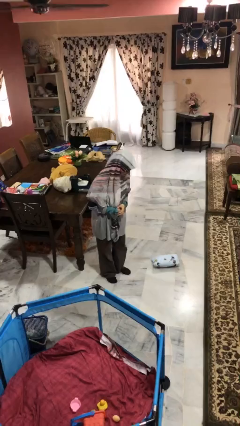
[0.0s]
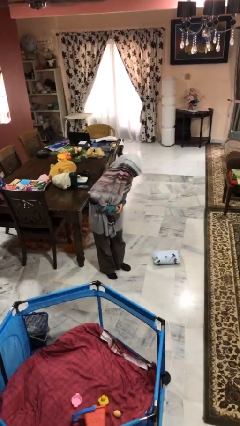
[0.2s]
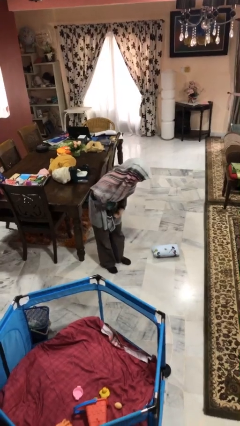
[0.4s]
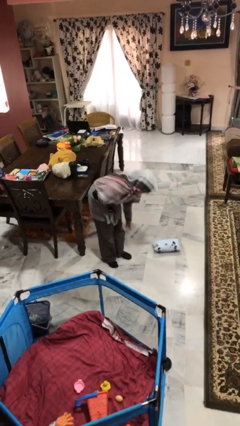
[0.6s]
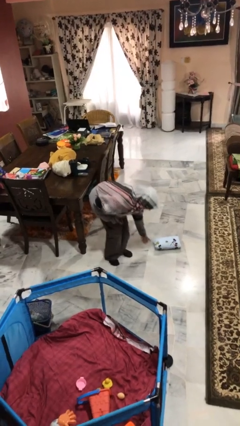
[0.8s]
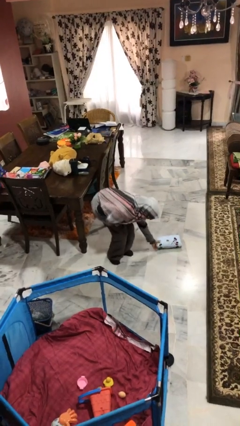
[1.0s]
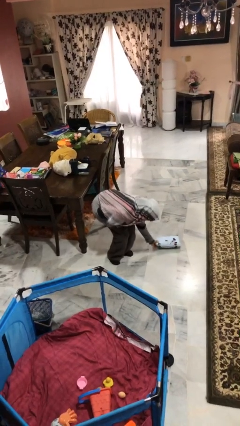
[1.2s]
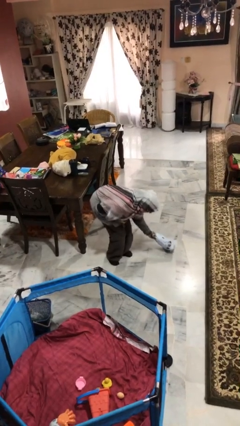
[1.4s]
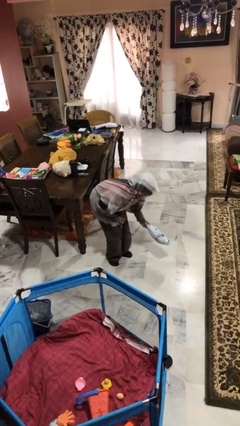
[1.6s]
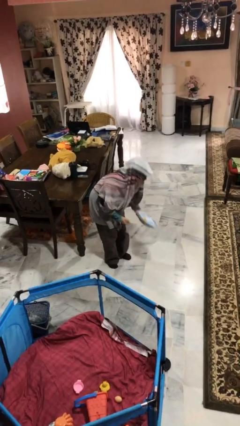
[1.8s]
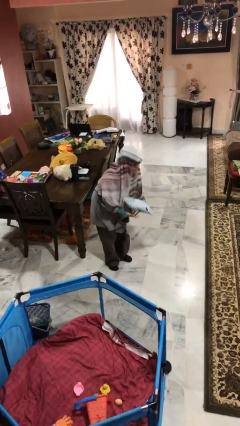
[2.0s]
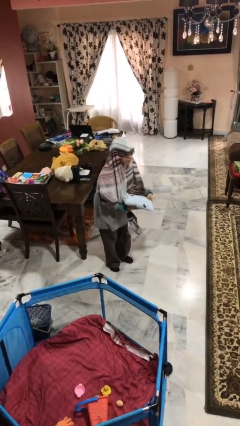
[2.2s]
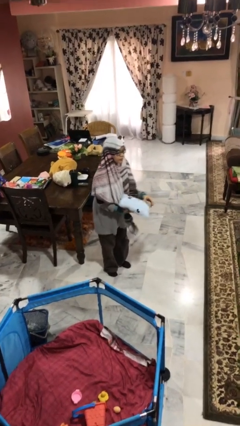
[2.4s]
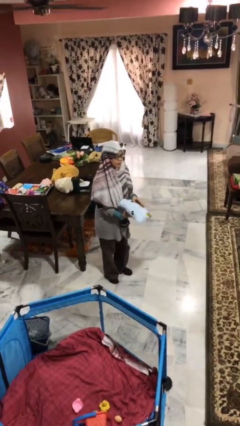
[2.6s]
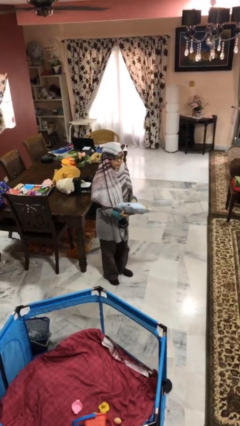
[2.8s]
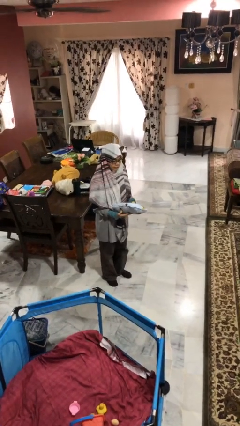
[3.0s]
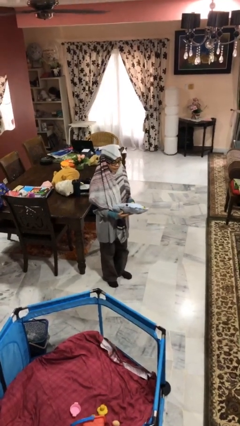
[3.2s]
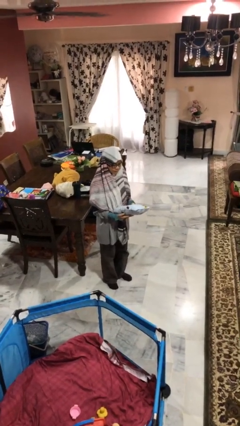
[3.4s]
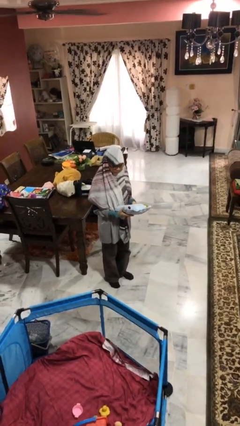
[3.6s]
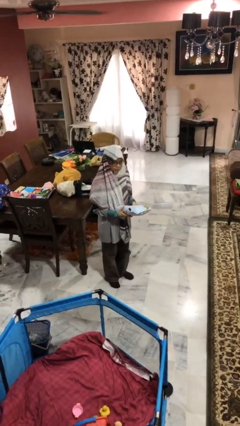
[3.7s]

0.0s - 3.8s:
person picks up object from floor

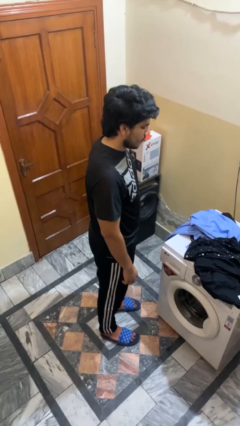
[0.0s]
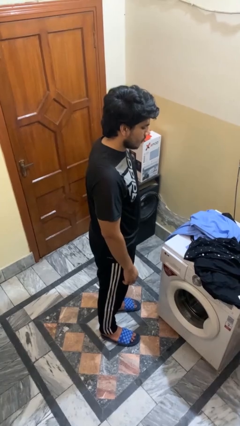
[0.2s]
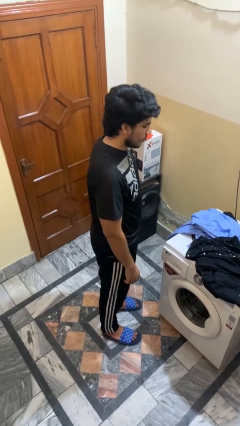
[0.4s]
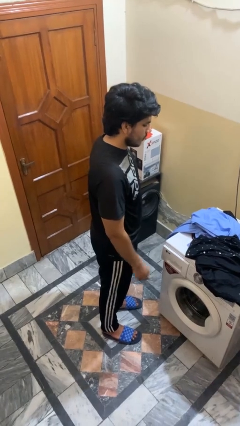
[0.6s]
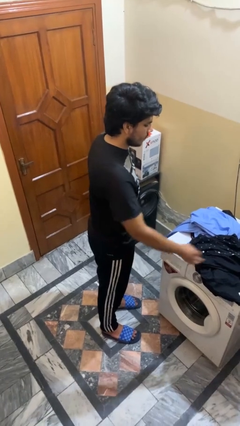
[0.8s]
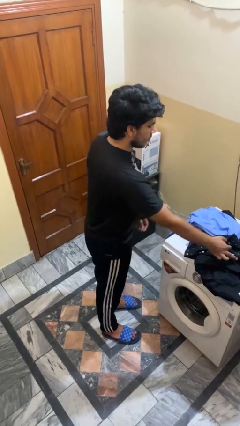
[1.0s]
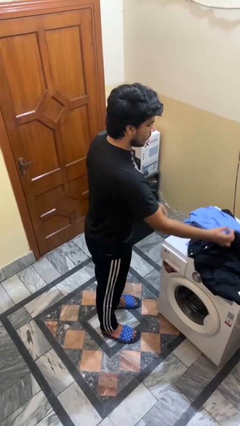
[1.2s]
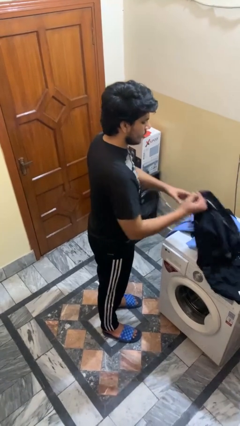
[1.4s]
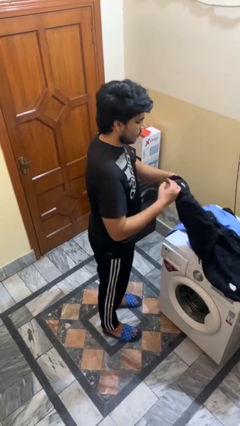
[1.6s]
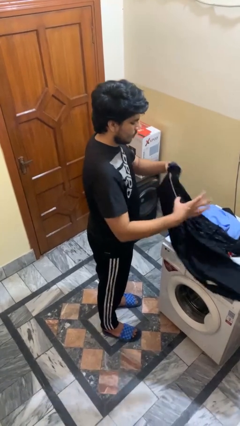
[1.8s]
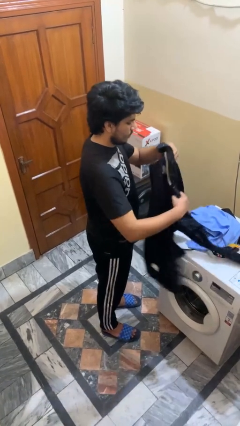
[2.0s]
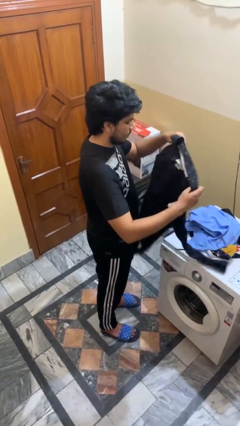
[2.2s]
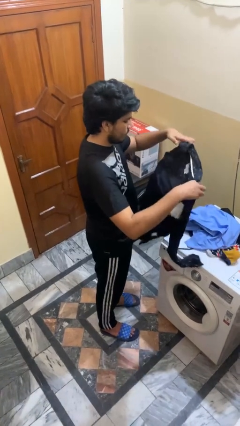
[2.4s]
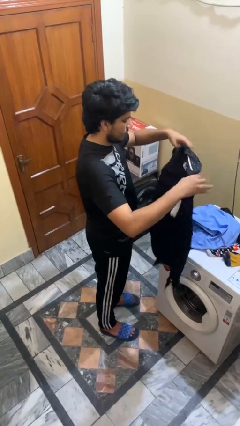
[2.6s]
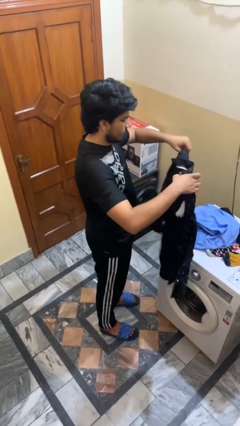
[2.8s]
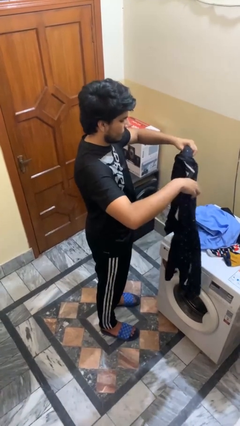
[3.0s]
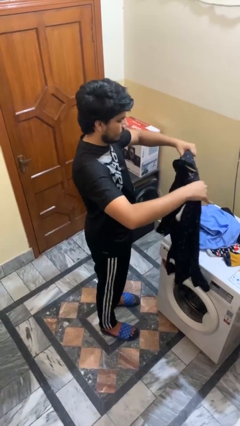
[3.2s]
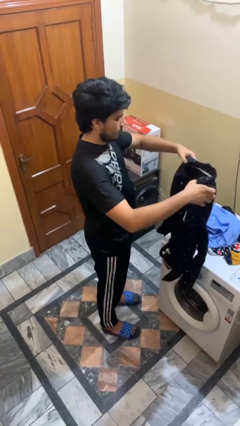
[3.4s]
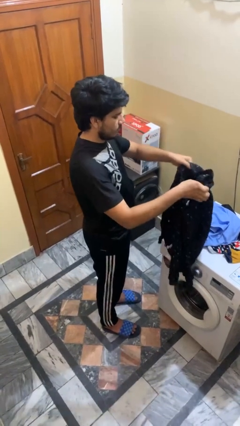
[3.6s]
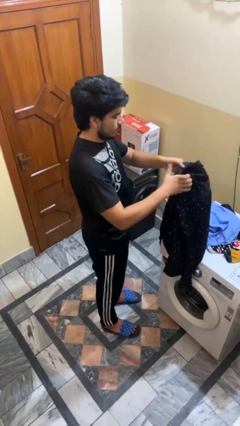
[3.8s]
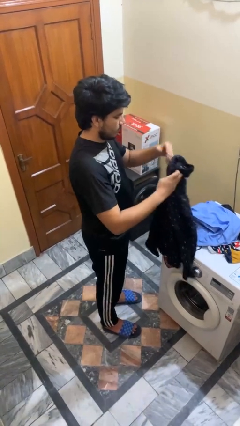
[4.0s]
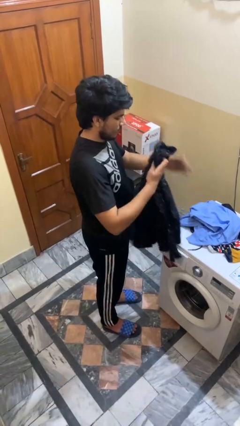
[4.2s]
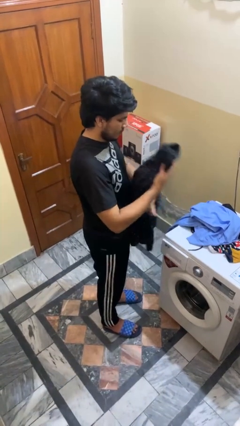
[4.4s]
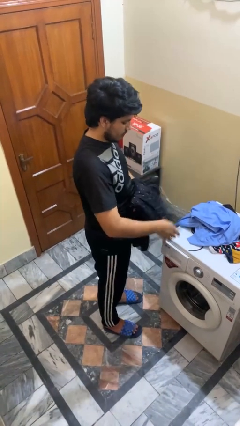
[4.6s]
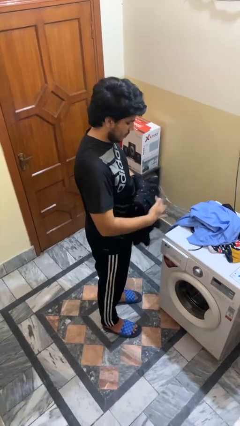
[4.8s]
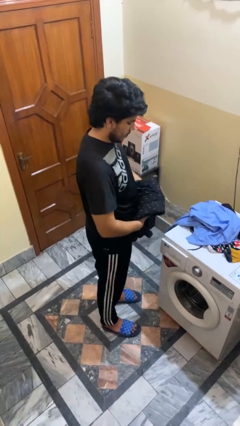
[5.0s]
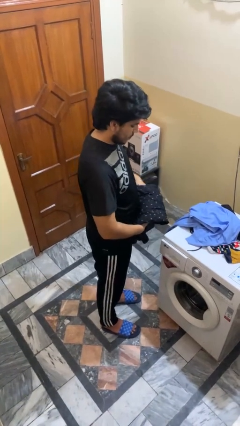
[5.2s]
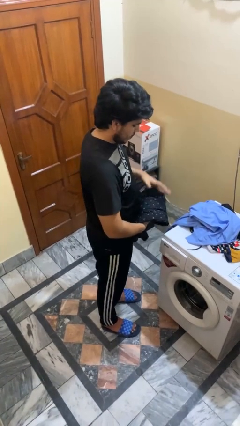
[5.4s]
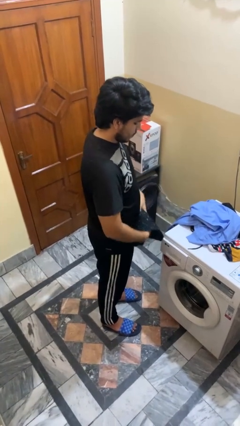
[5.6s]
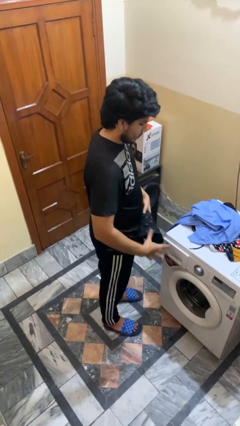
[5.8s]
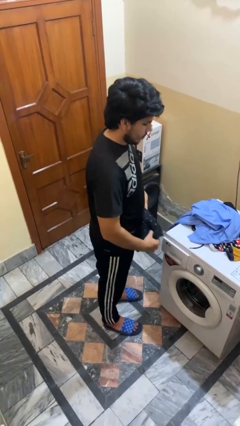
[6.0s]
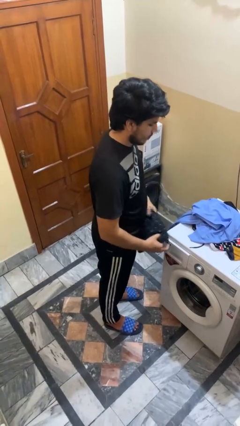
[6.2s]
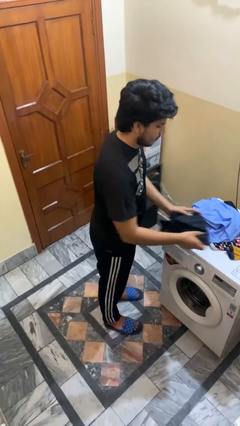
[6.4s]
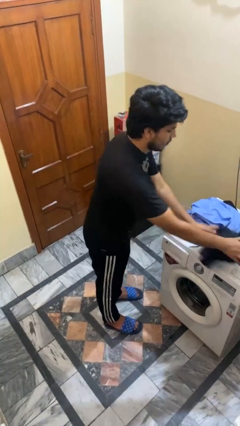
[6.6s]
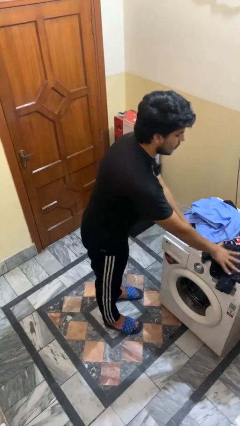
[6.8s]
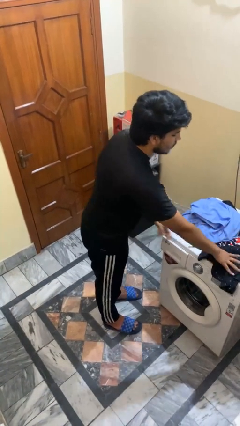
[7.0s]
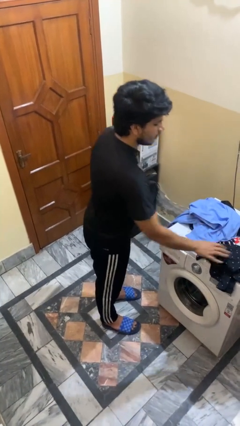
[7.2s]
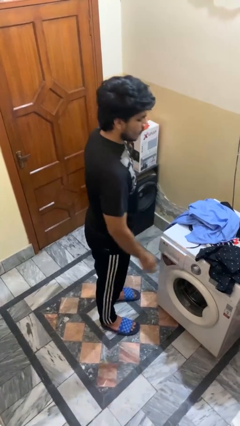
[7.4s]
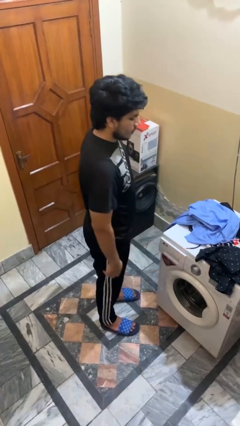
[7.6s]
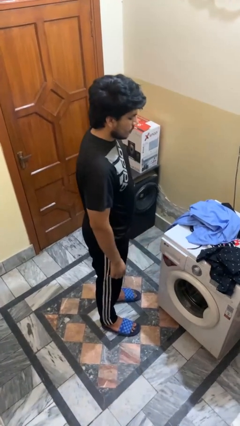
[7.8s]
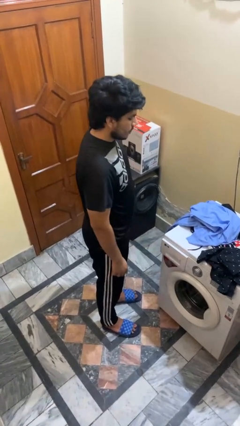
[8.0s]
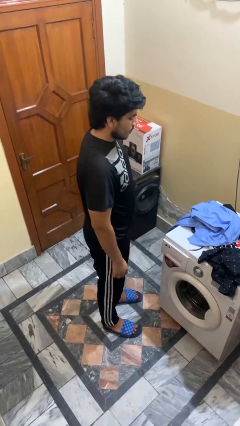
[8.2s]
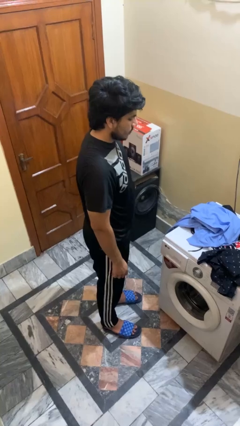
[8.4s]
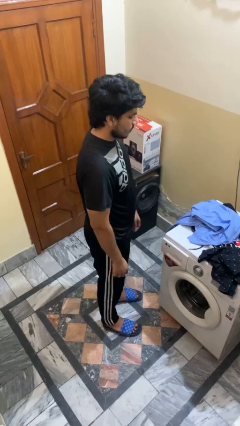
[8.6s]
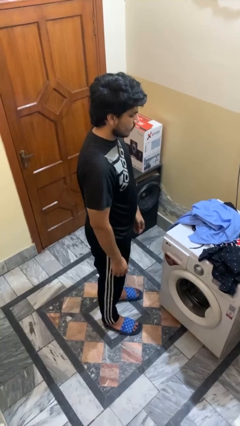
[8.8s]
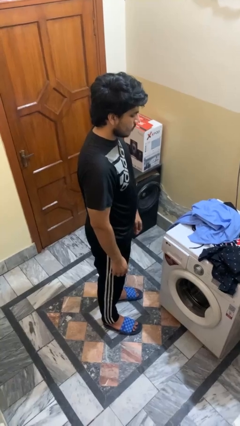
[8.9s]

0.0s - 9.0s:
person folds shirt

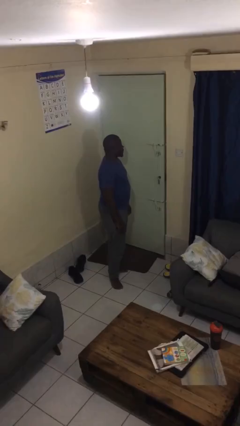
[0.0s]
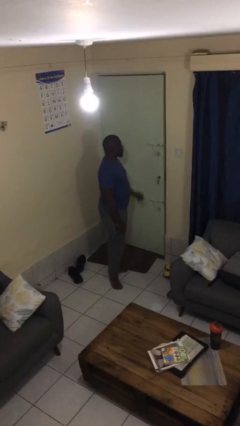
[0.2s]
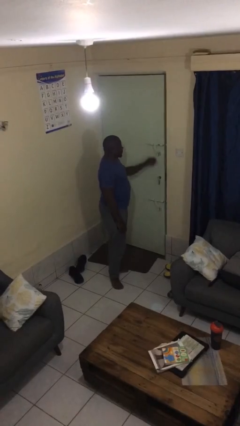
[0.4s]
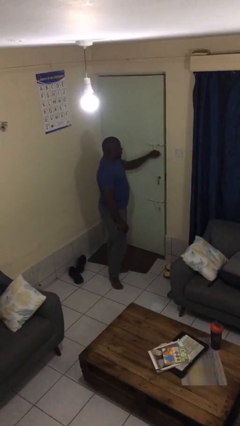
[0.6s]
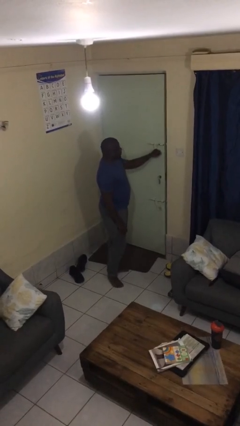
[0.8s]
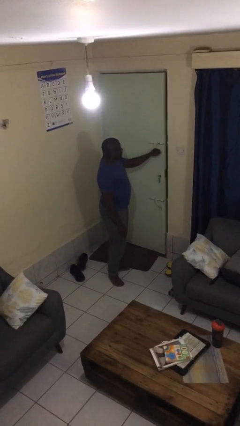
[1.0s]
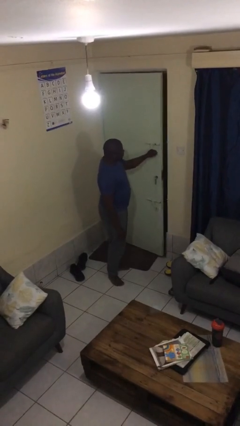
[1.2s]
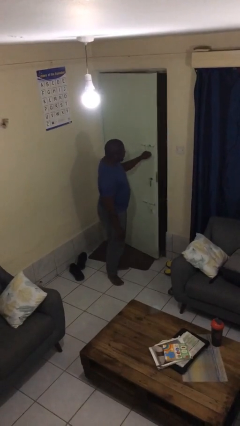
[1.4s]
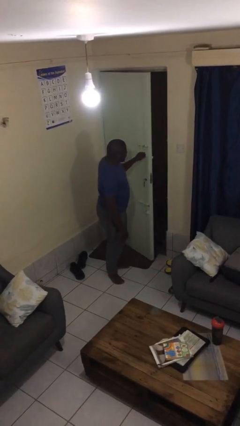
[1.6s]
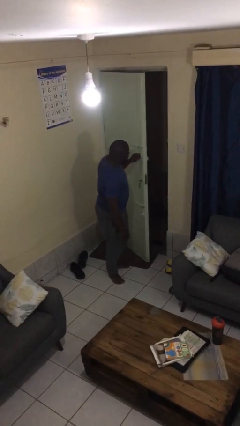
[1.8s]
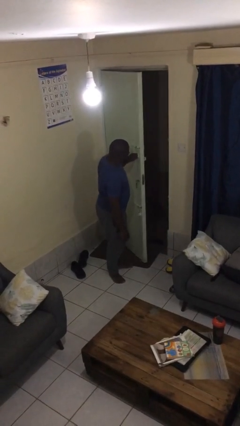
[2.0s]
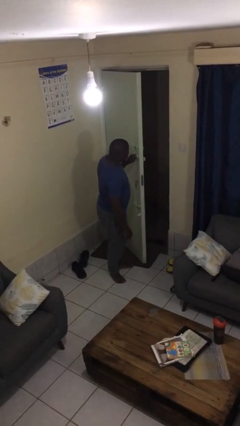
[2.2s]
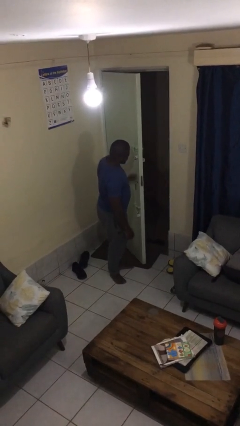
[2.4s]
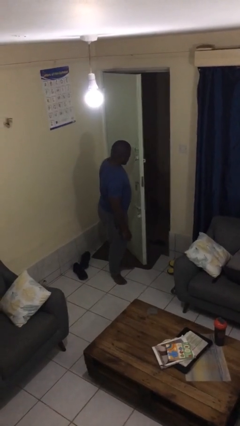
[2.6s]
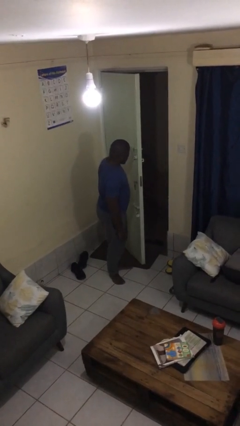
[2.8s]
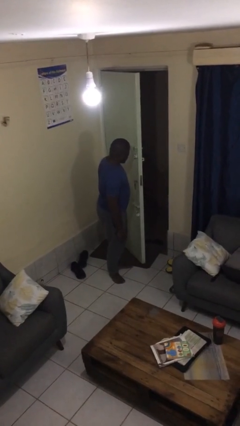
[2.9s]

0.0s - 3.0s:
person opens facility door

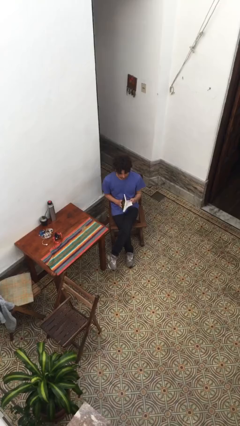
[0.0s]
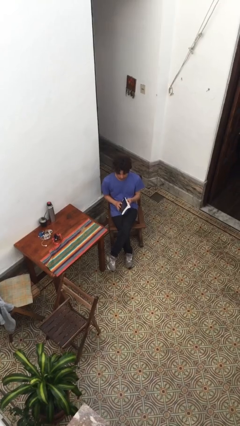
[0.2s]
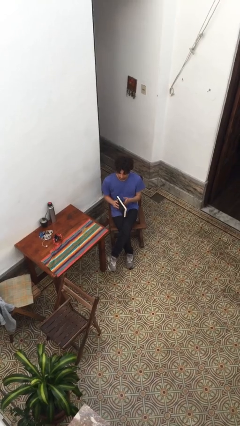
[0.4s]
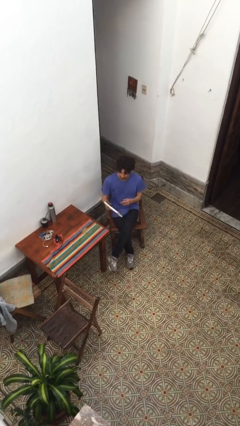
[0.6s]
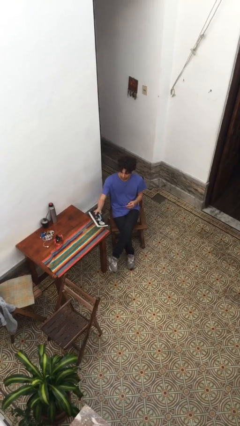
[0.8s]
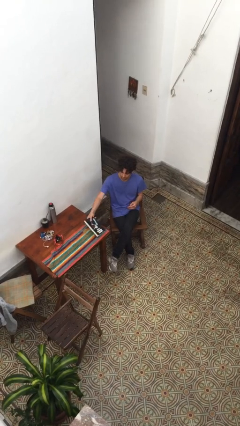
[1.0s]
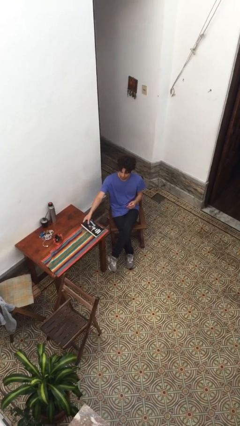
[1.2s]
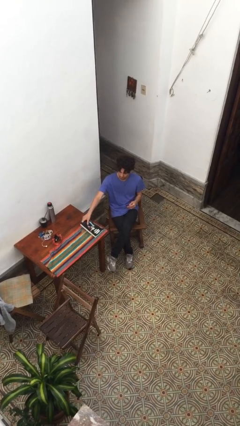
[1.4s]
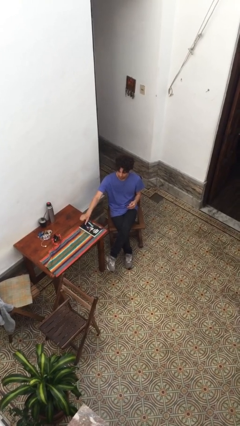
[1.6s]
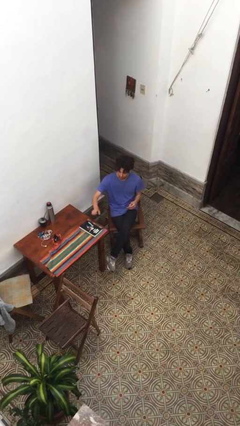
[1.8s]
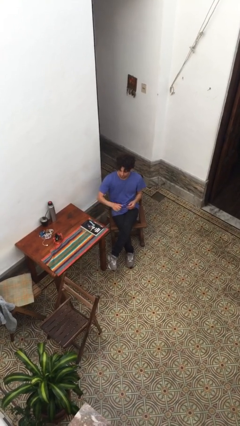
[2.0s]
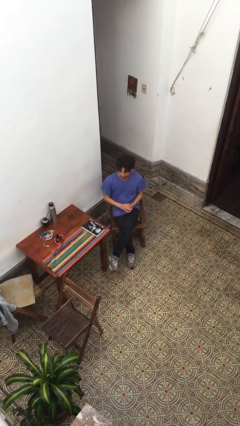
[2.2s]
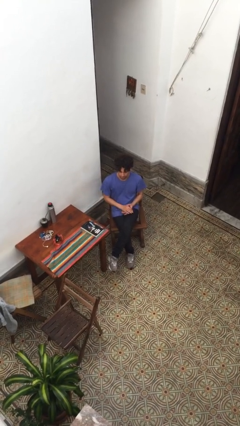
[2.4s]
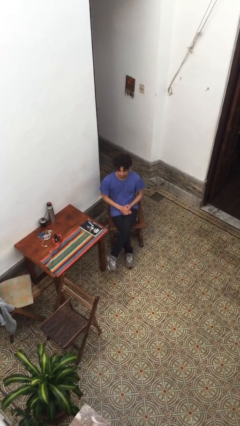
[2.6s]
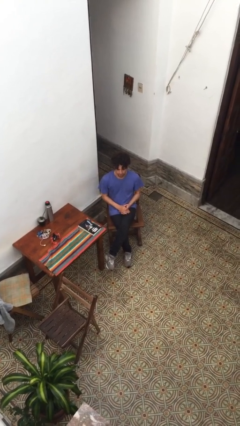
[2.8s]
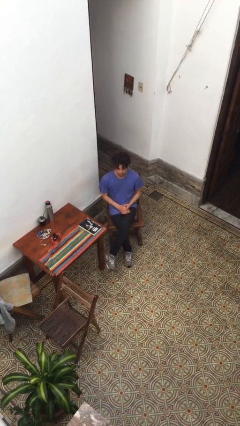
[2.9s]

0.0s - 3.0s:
person puts down object on table
